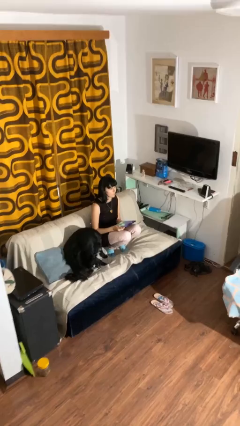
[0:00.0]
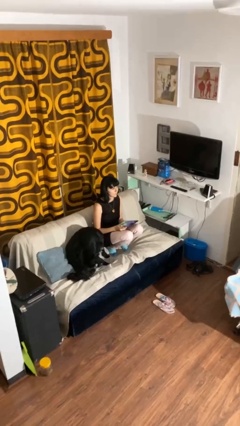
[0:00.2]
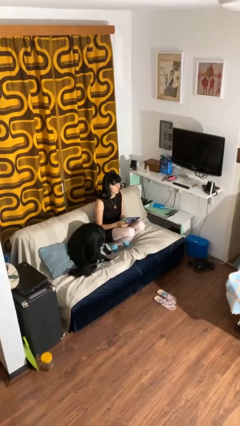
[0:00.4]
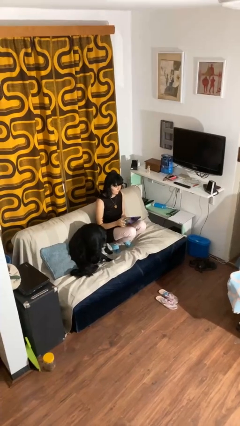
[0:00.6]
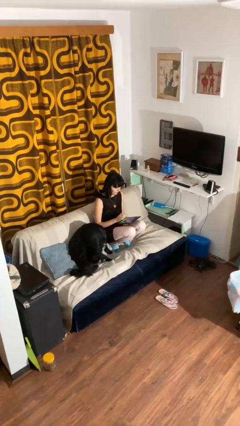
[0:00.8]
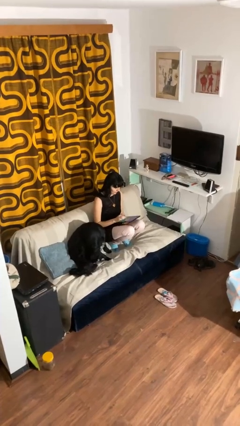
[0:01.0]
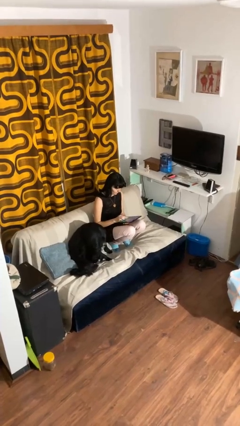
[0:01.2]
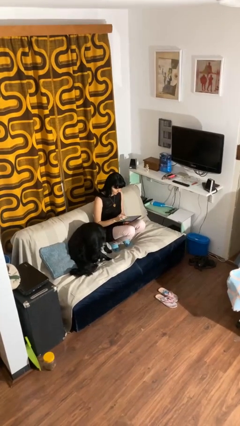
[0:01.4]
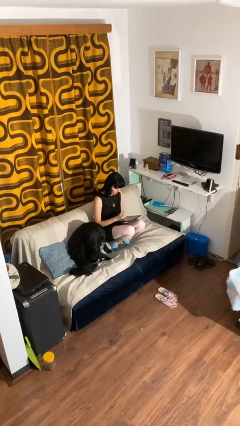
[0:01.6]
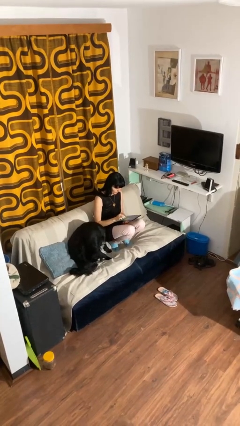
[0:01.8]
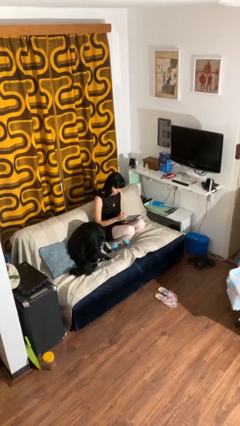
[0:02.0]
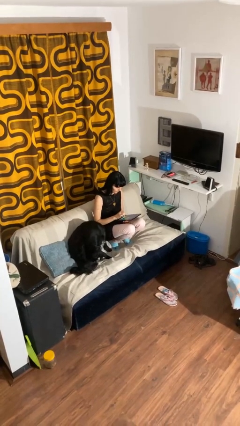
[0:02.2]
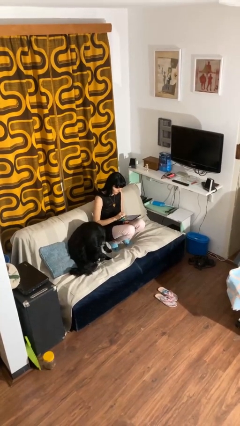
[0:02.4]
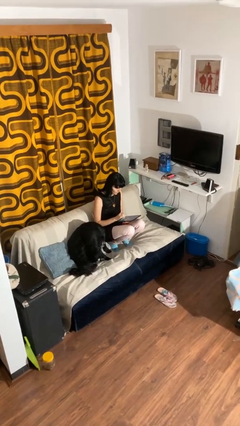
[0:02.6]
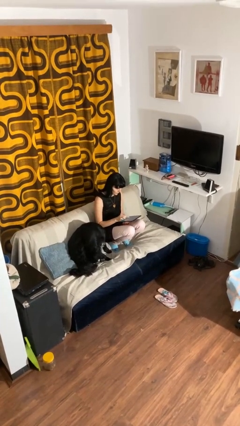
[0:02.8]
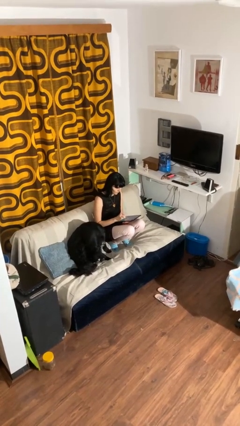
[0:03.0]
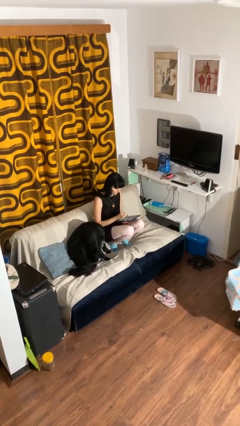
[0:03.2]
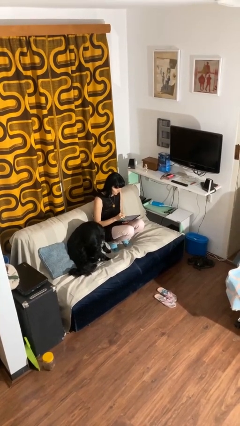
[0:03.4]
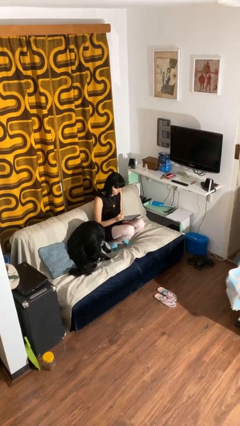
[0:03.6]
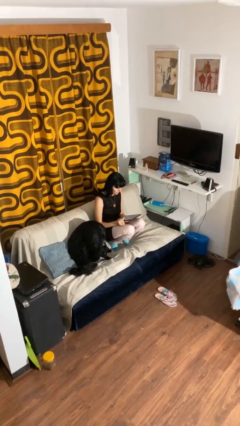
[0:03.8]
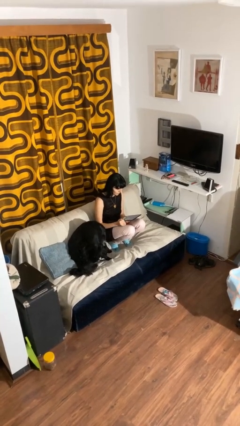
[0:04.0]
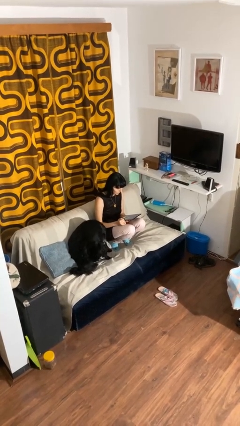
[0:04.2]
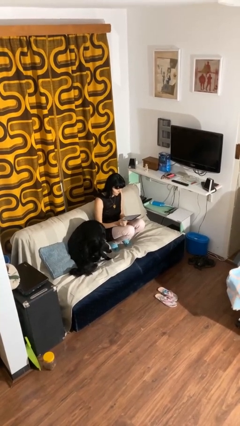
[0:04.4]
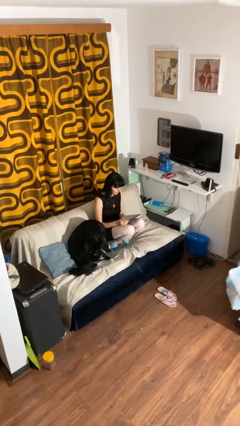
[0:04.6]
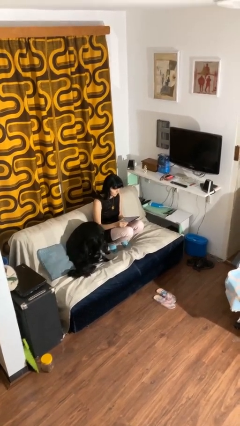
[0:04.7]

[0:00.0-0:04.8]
person interacts with tablet

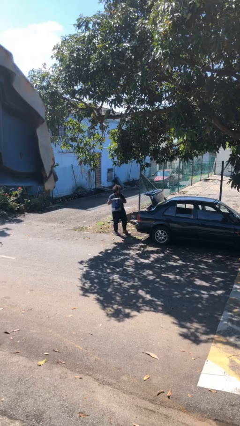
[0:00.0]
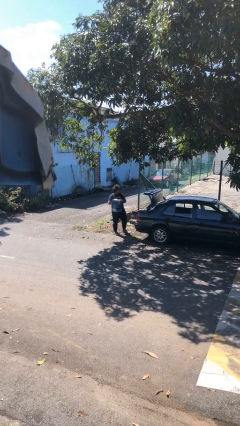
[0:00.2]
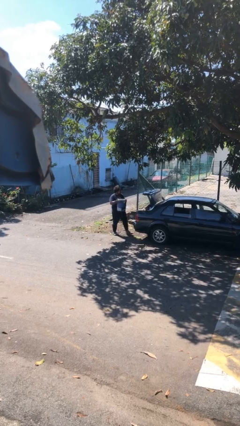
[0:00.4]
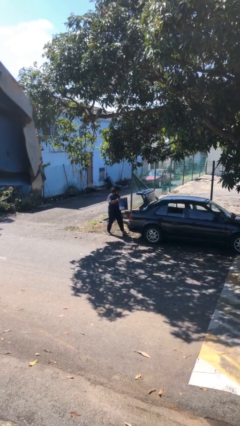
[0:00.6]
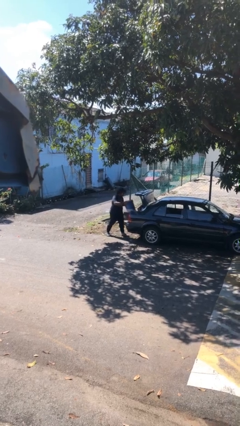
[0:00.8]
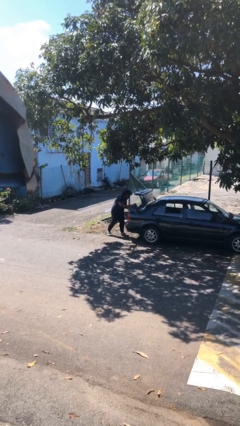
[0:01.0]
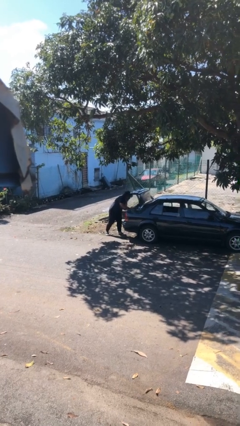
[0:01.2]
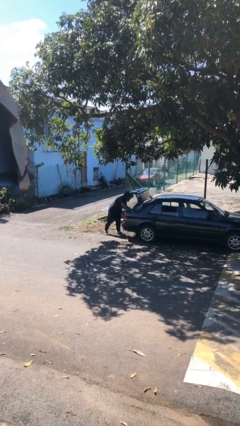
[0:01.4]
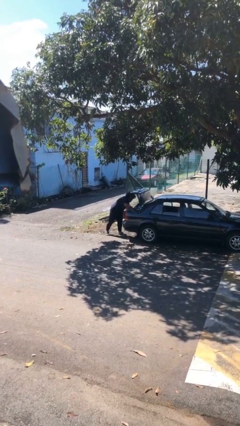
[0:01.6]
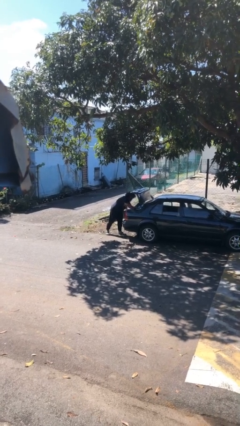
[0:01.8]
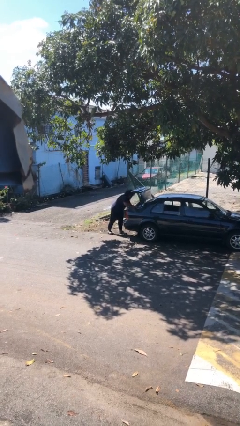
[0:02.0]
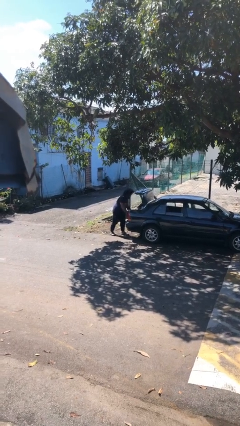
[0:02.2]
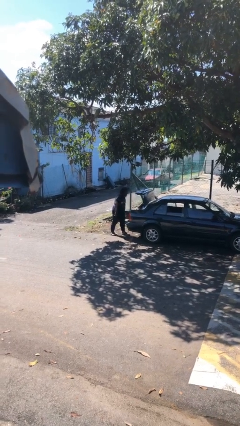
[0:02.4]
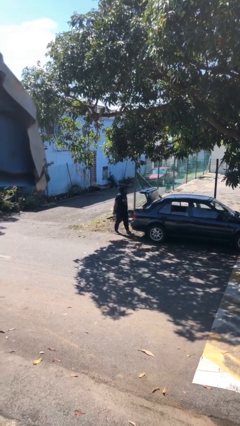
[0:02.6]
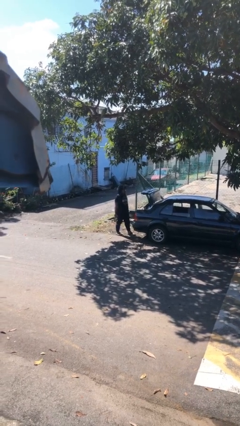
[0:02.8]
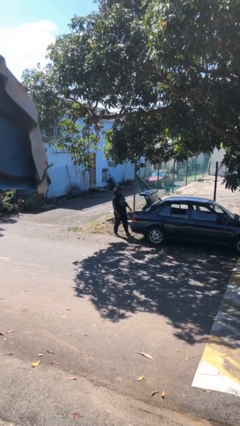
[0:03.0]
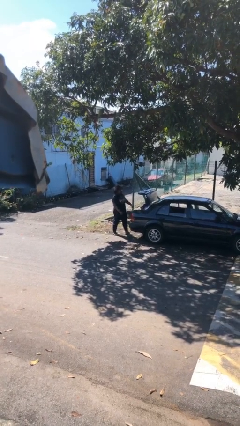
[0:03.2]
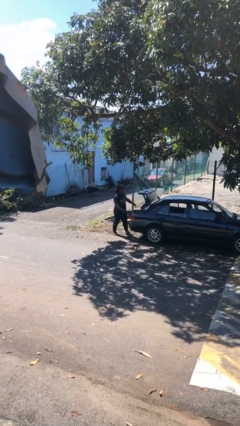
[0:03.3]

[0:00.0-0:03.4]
person loads car

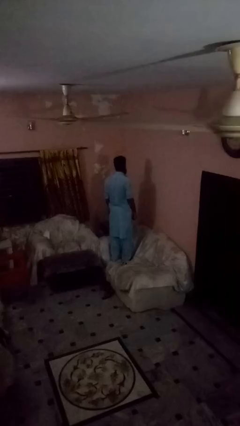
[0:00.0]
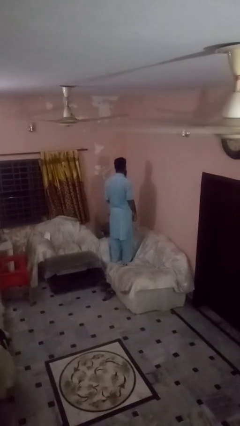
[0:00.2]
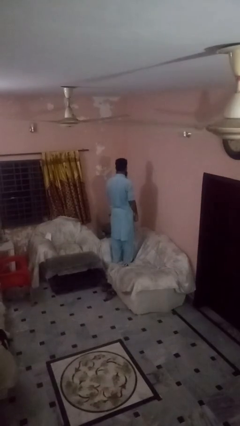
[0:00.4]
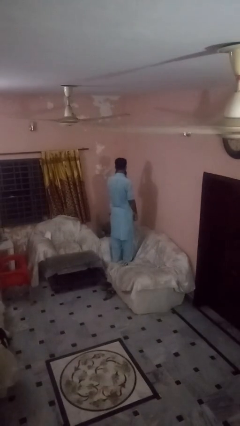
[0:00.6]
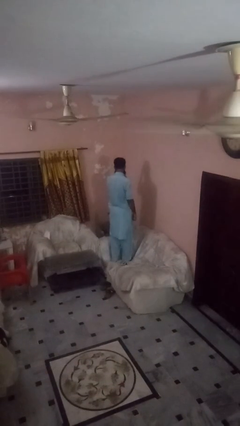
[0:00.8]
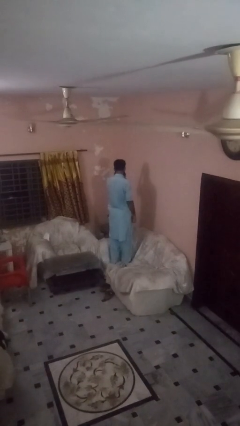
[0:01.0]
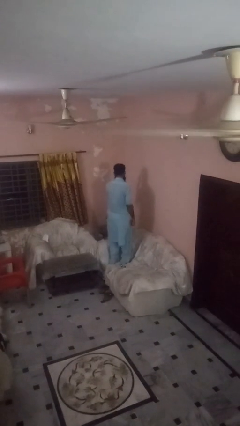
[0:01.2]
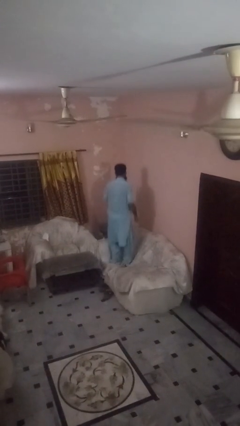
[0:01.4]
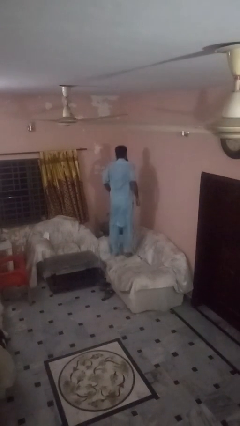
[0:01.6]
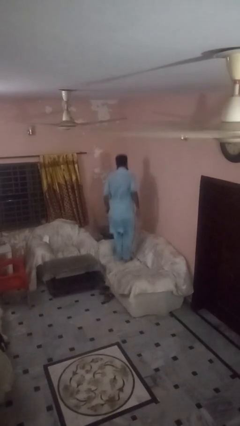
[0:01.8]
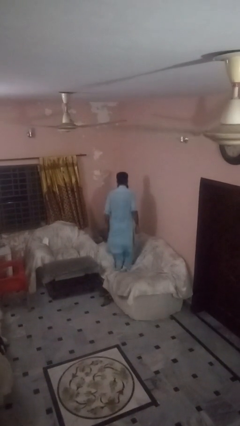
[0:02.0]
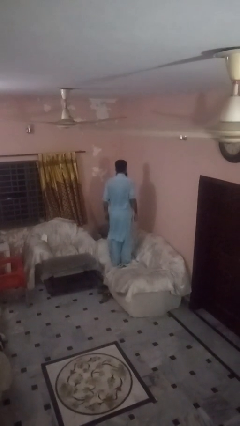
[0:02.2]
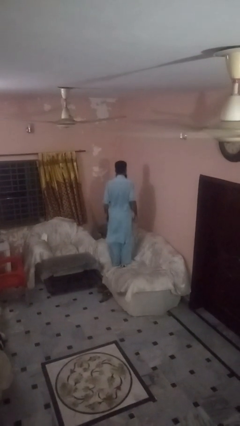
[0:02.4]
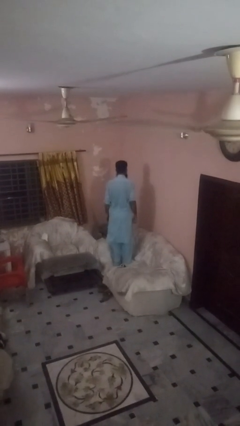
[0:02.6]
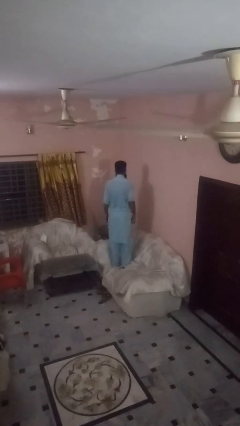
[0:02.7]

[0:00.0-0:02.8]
person jumps on couch

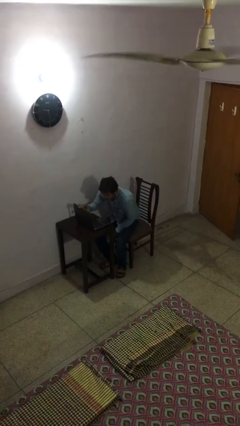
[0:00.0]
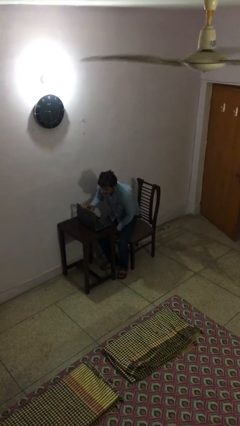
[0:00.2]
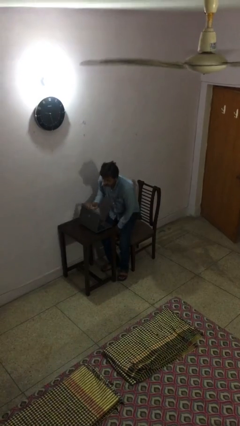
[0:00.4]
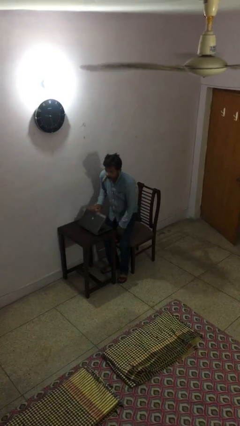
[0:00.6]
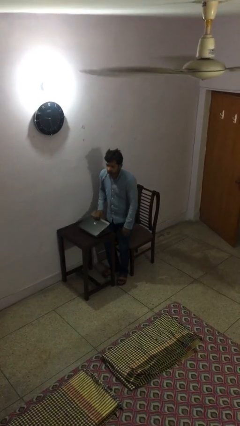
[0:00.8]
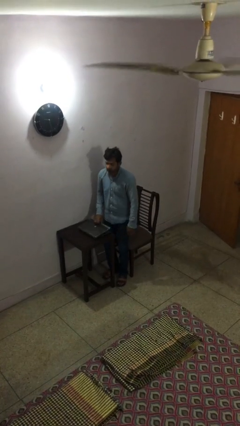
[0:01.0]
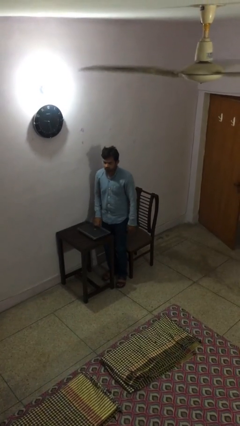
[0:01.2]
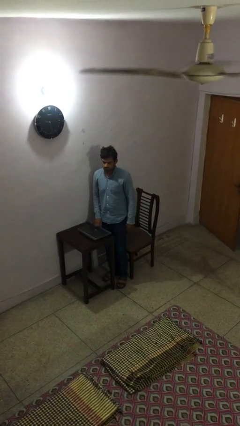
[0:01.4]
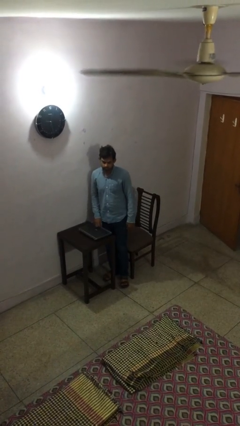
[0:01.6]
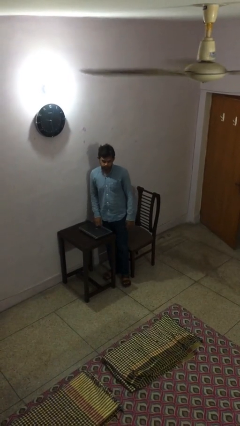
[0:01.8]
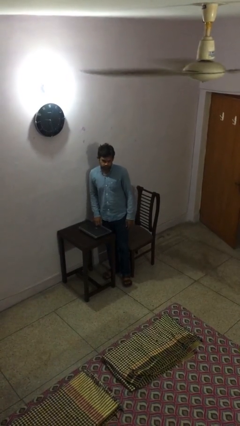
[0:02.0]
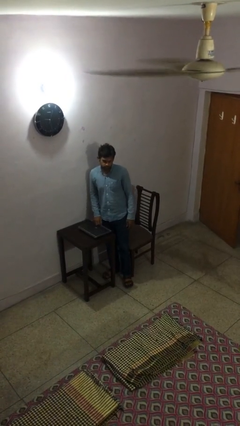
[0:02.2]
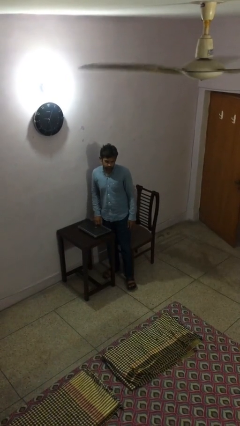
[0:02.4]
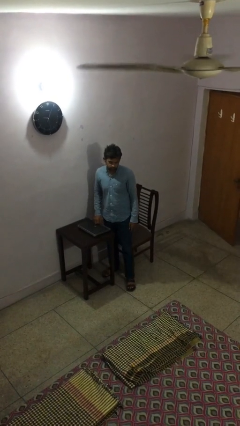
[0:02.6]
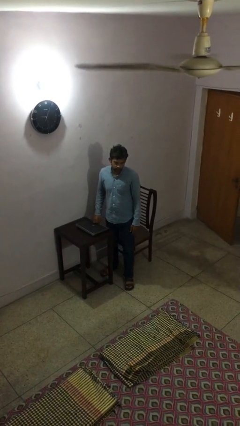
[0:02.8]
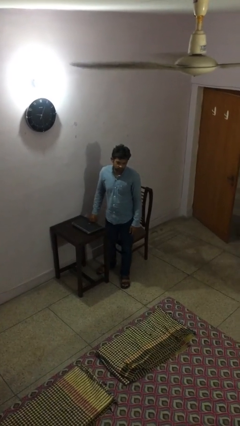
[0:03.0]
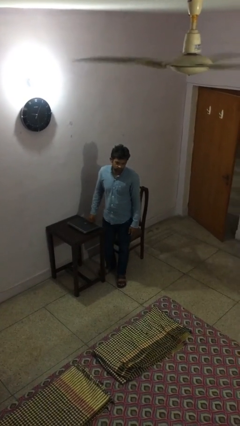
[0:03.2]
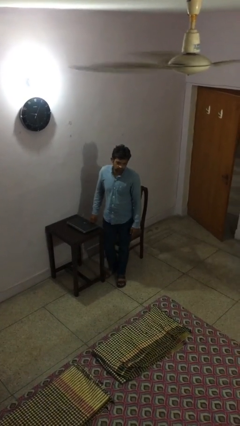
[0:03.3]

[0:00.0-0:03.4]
person stands up

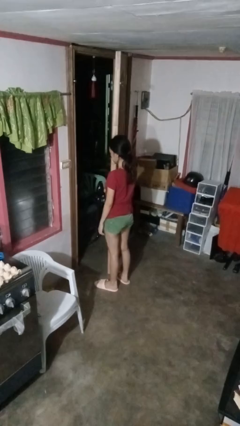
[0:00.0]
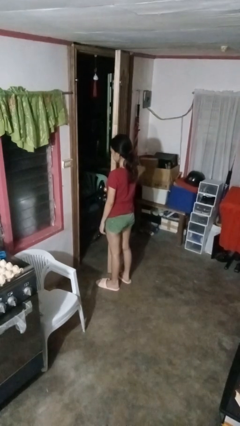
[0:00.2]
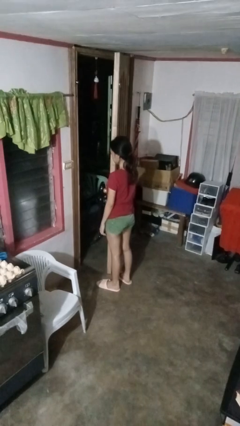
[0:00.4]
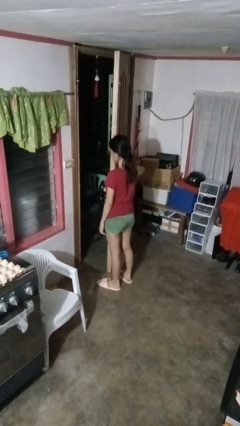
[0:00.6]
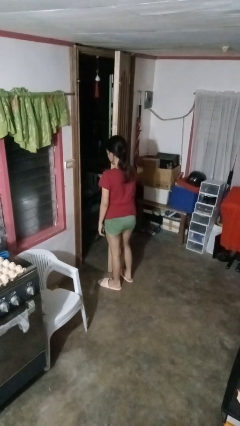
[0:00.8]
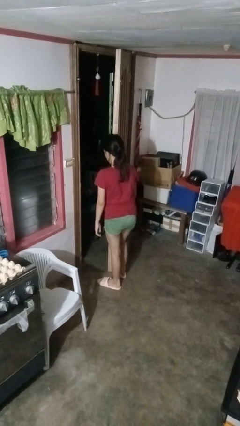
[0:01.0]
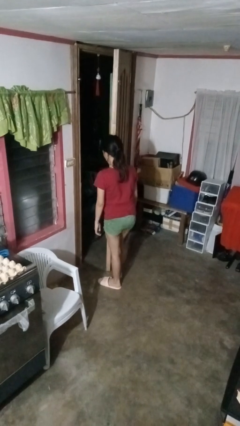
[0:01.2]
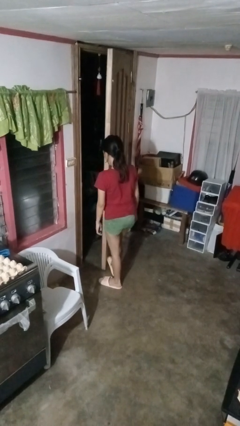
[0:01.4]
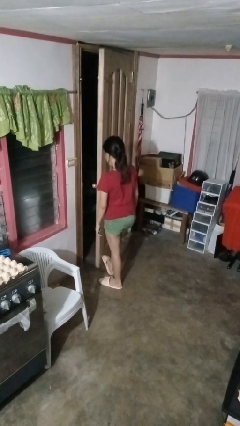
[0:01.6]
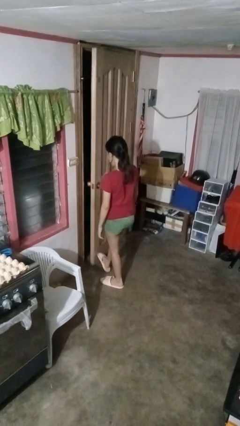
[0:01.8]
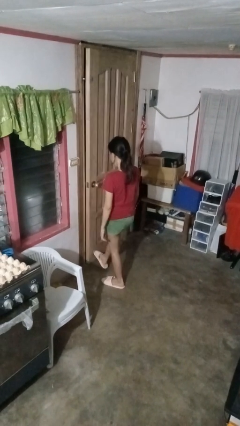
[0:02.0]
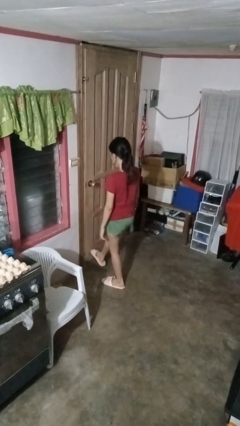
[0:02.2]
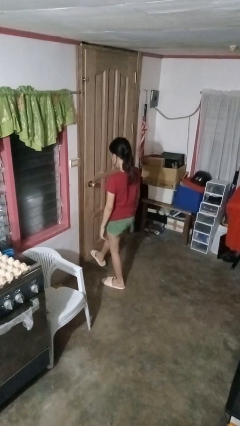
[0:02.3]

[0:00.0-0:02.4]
person closes door with foot

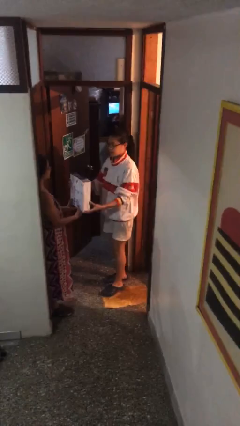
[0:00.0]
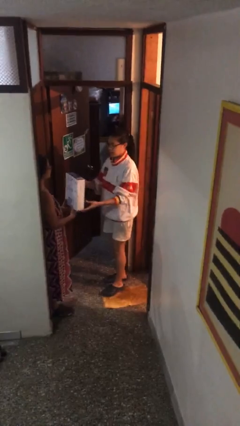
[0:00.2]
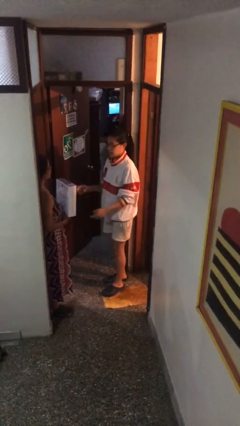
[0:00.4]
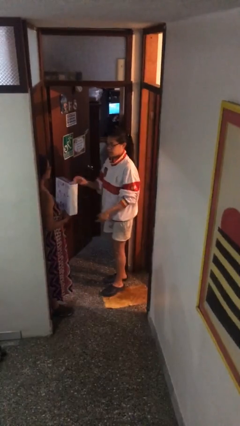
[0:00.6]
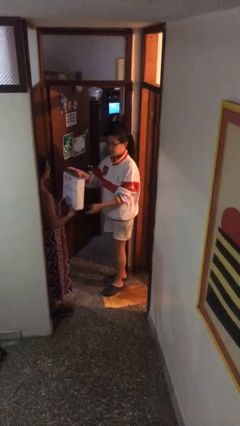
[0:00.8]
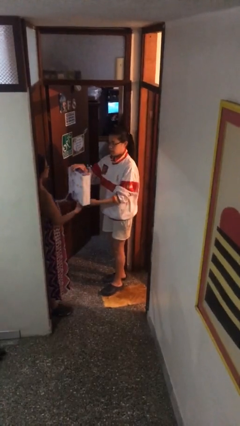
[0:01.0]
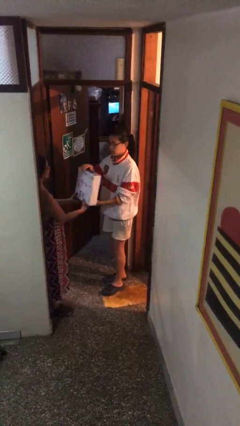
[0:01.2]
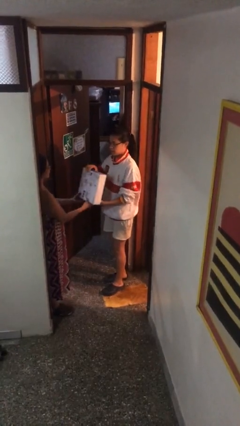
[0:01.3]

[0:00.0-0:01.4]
person transfers object to person
